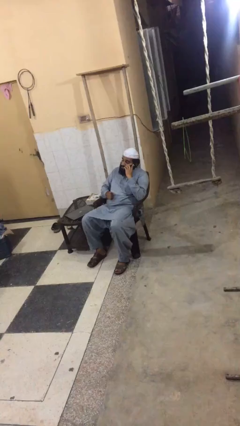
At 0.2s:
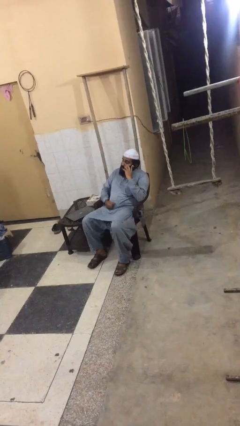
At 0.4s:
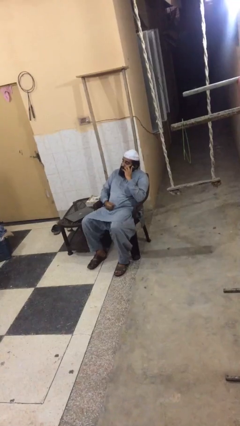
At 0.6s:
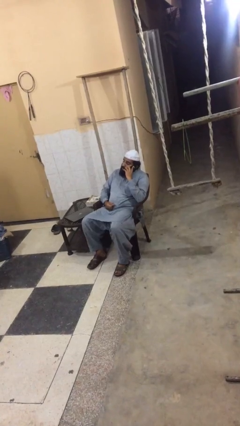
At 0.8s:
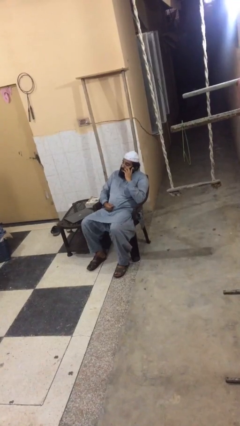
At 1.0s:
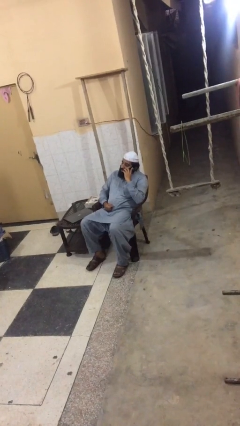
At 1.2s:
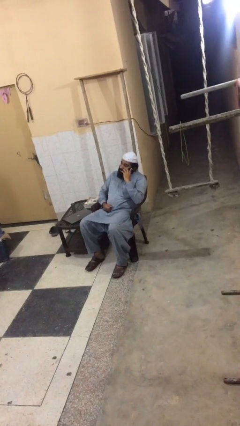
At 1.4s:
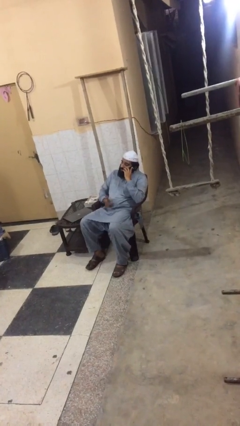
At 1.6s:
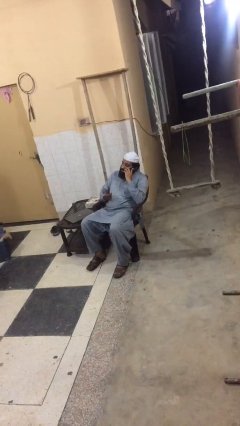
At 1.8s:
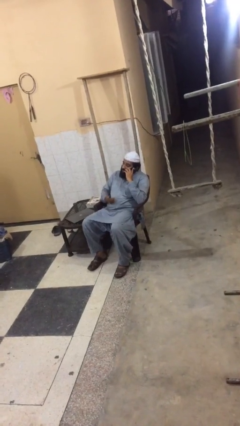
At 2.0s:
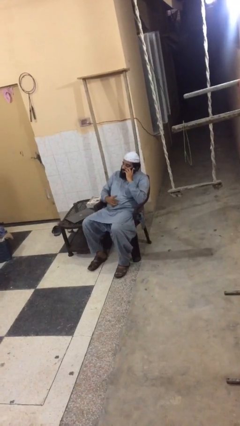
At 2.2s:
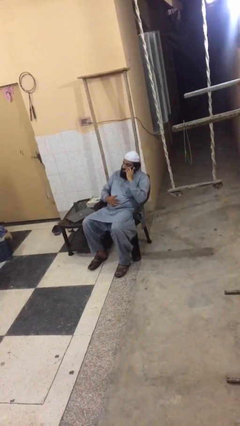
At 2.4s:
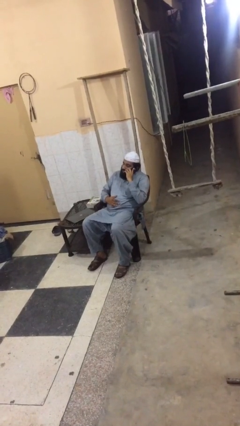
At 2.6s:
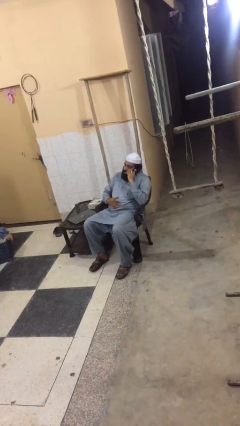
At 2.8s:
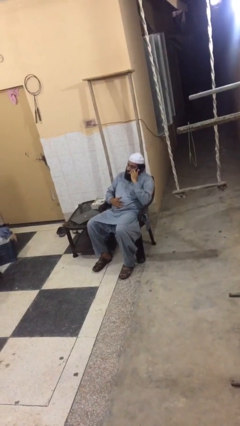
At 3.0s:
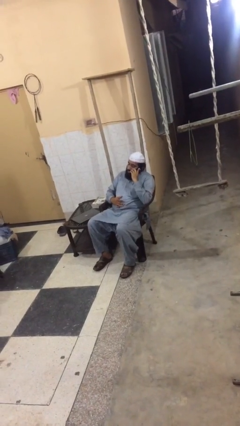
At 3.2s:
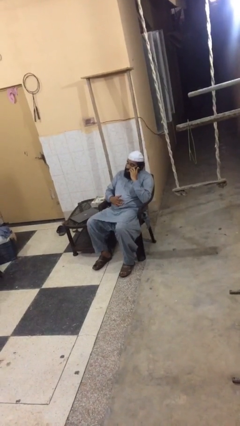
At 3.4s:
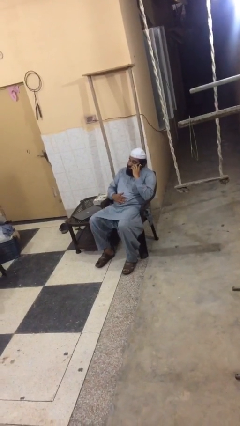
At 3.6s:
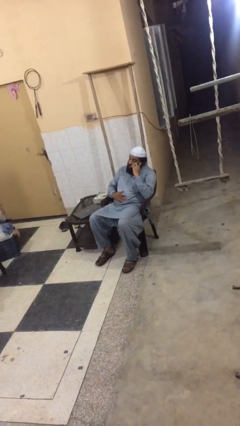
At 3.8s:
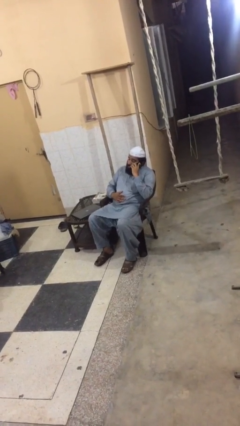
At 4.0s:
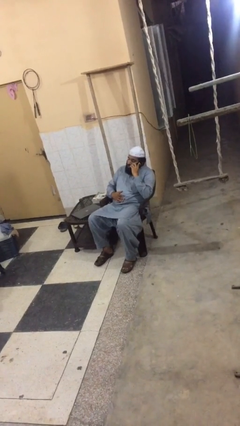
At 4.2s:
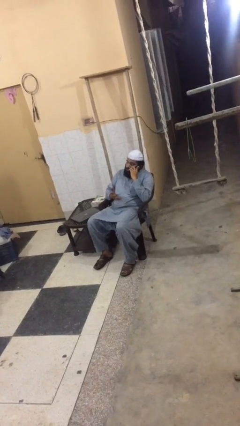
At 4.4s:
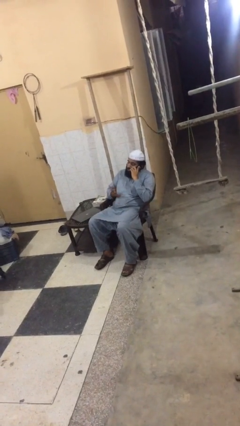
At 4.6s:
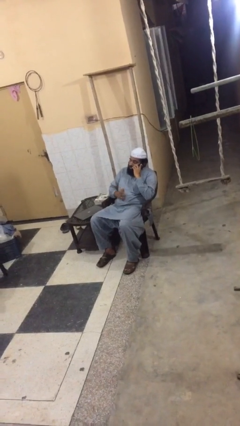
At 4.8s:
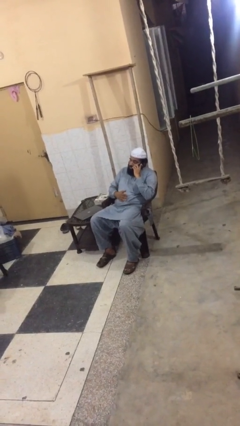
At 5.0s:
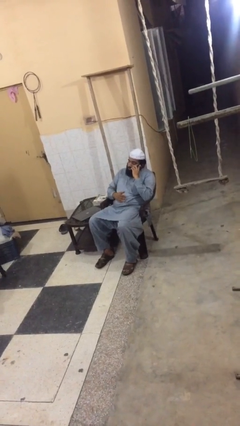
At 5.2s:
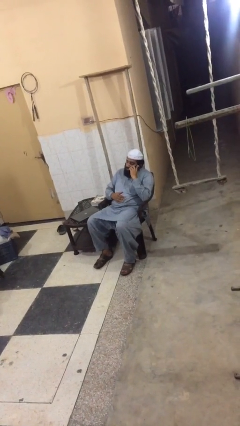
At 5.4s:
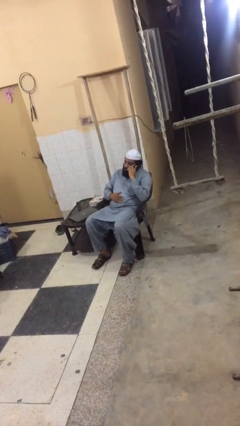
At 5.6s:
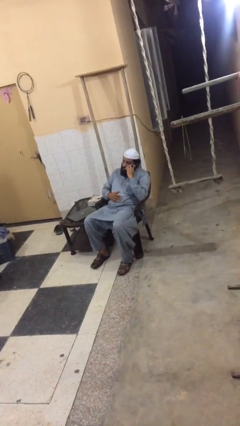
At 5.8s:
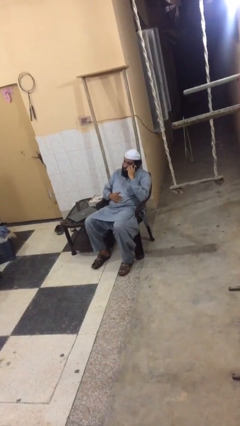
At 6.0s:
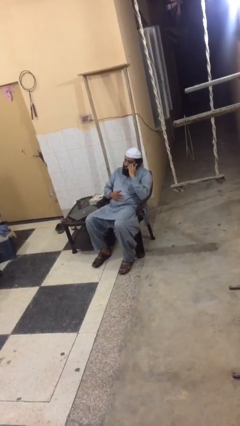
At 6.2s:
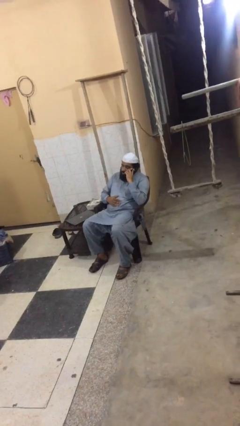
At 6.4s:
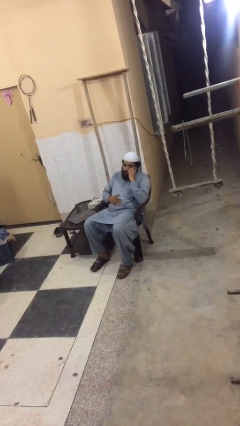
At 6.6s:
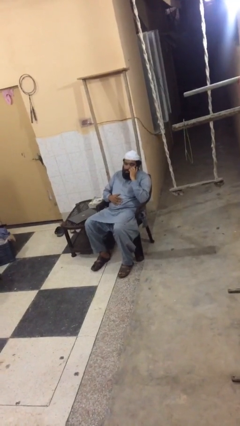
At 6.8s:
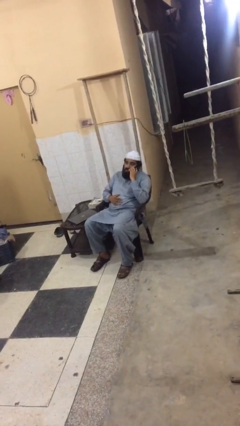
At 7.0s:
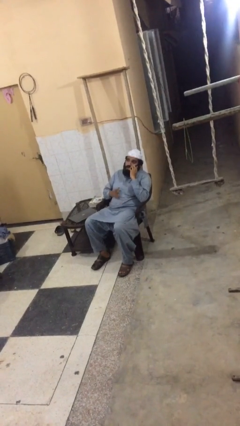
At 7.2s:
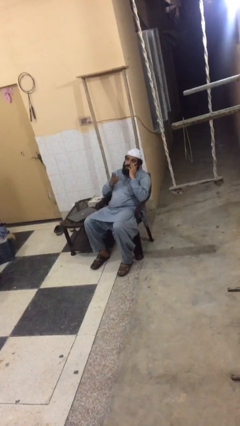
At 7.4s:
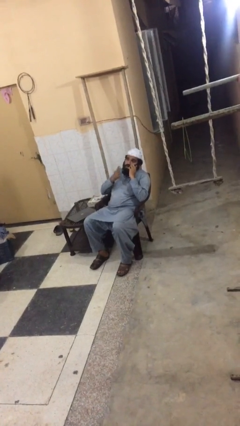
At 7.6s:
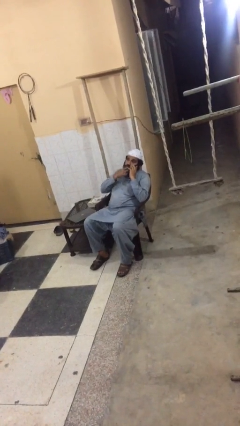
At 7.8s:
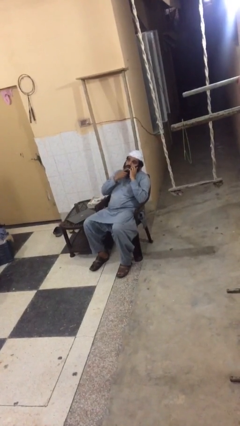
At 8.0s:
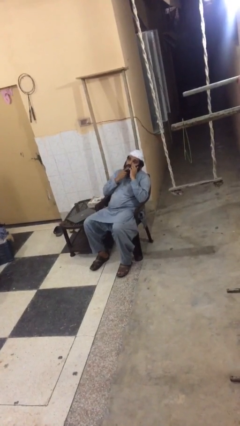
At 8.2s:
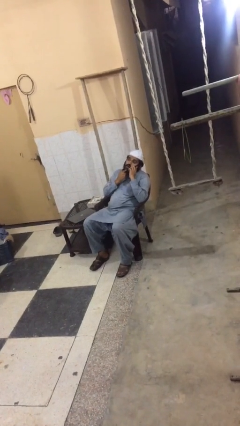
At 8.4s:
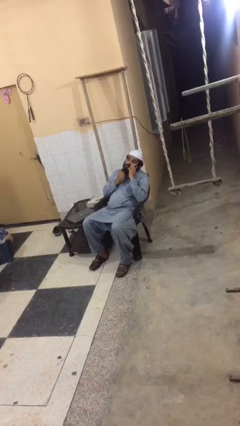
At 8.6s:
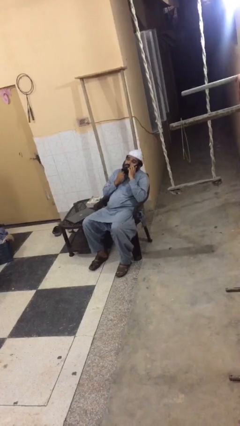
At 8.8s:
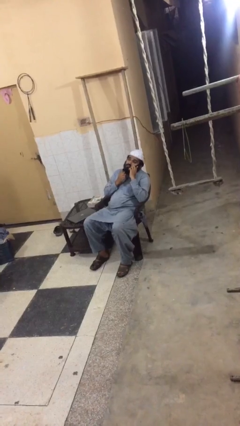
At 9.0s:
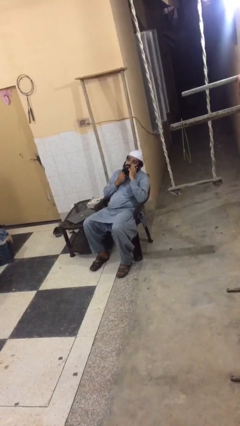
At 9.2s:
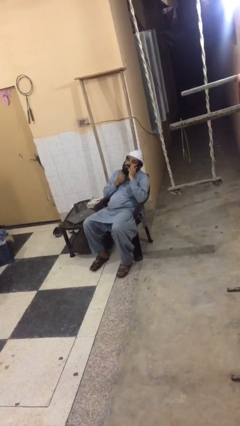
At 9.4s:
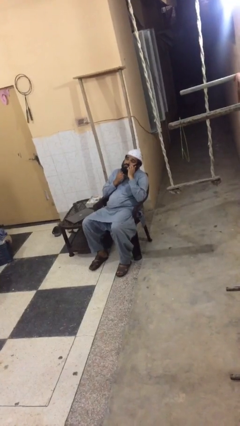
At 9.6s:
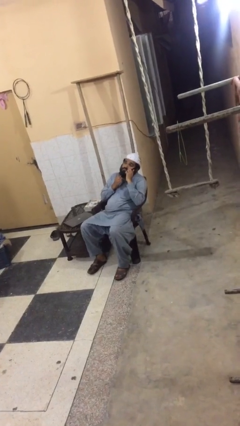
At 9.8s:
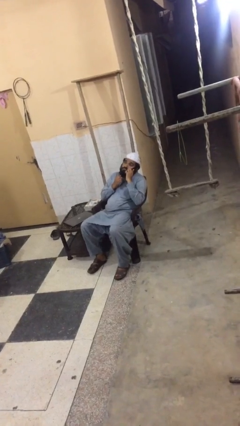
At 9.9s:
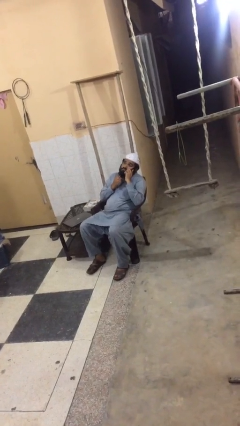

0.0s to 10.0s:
person talks on phone

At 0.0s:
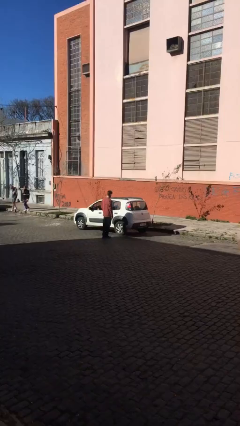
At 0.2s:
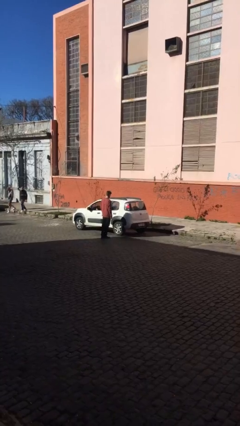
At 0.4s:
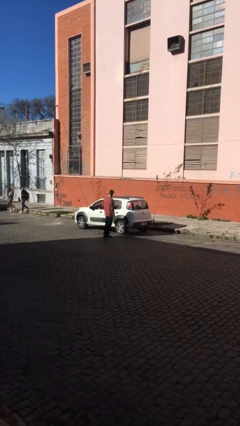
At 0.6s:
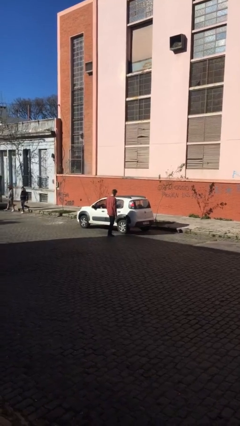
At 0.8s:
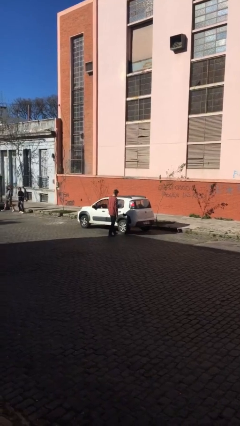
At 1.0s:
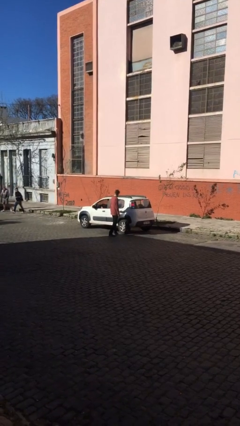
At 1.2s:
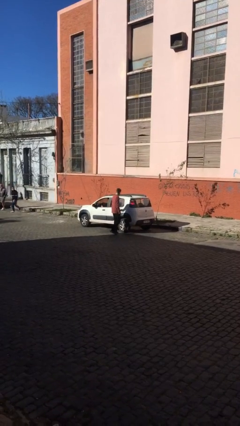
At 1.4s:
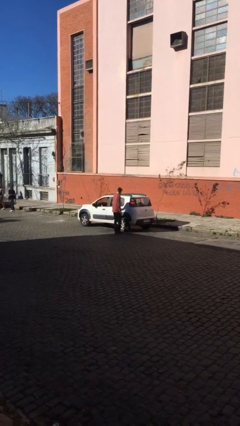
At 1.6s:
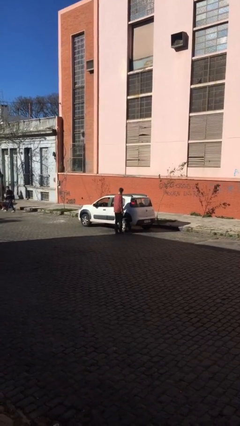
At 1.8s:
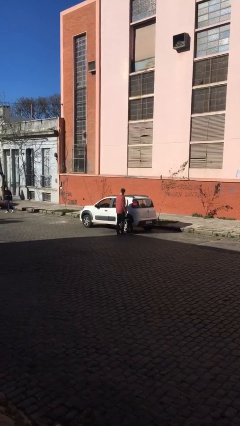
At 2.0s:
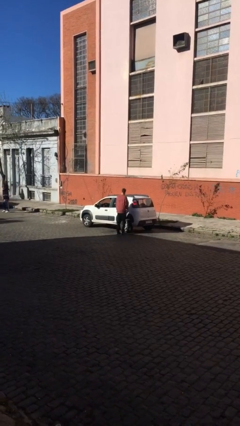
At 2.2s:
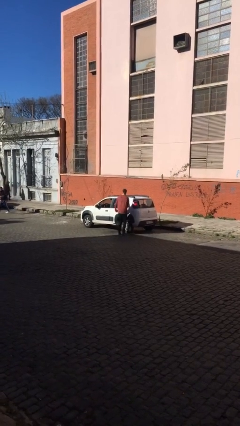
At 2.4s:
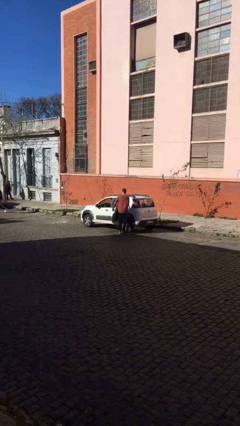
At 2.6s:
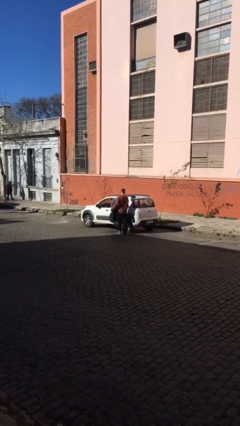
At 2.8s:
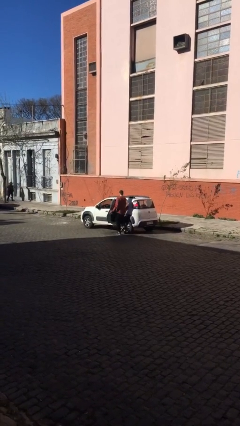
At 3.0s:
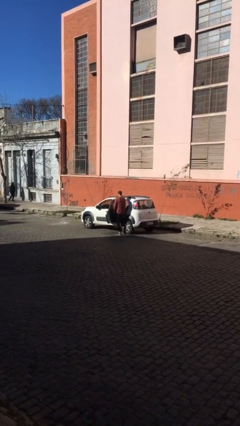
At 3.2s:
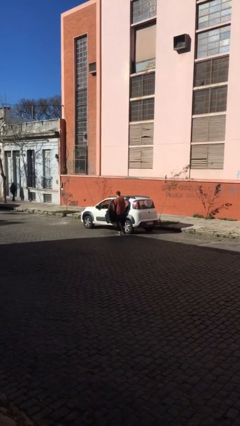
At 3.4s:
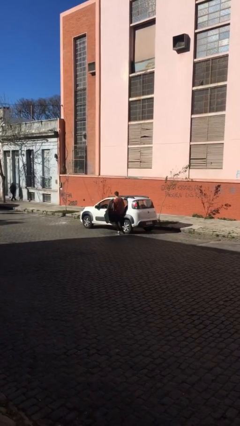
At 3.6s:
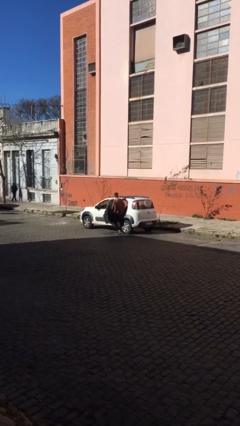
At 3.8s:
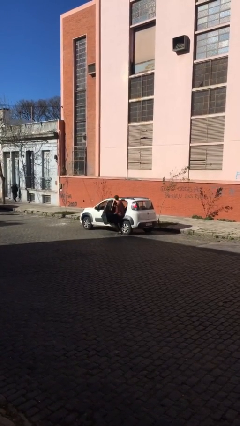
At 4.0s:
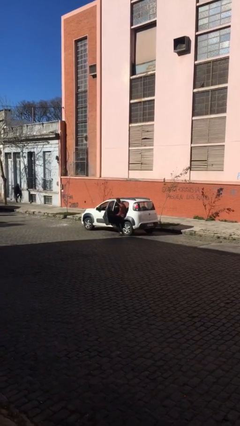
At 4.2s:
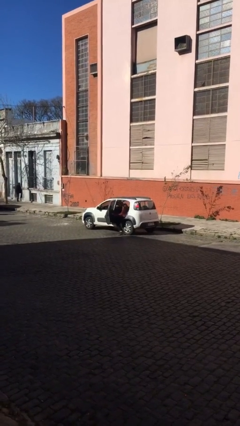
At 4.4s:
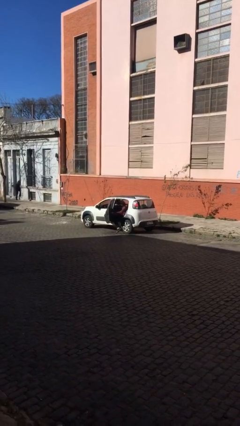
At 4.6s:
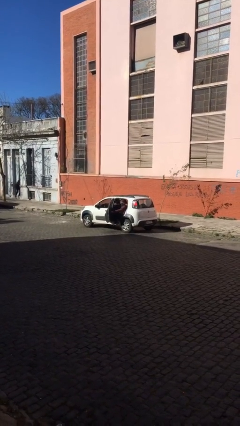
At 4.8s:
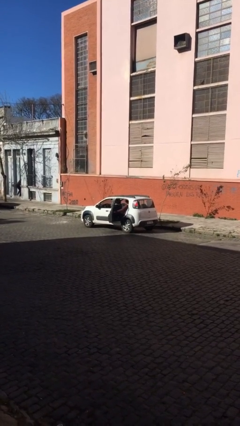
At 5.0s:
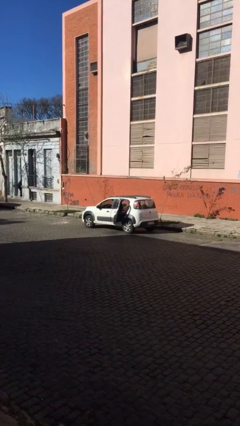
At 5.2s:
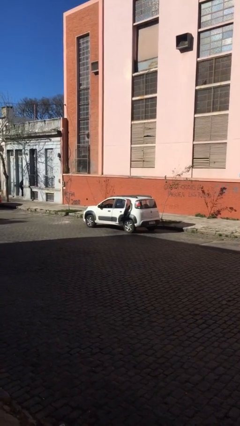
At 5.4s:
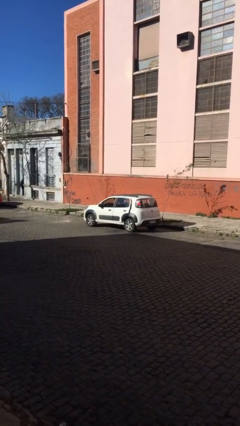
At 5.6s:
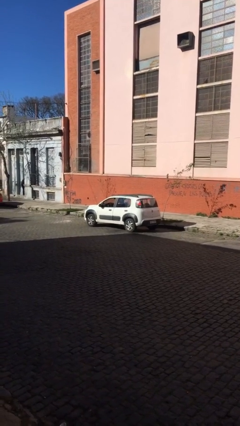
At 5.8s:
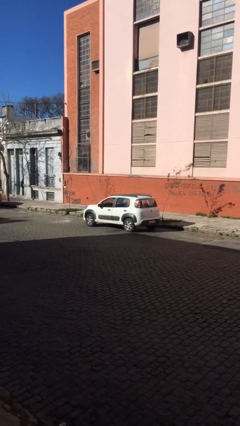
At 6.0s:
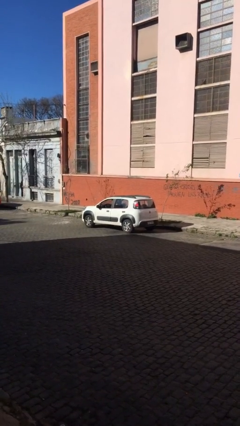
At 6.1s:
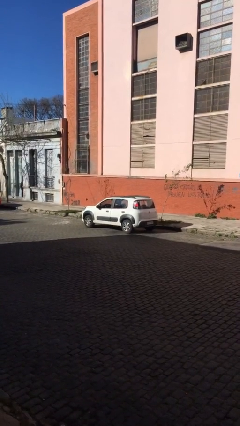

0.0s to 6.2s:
car picks up person

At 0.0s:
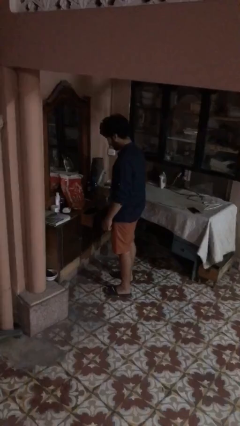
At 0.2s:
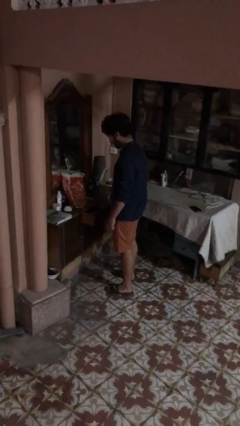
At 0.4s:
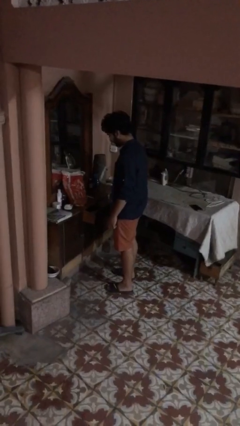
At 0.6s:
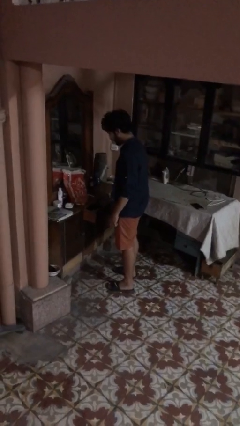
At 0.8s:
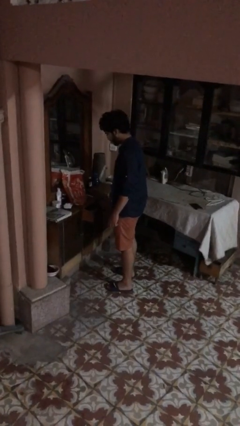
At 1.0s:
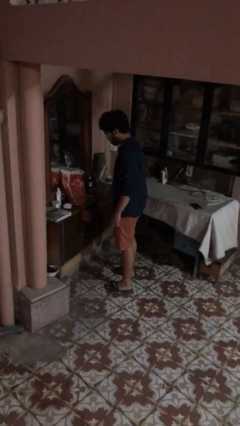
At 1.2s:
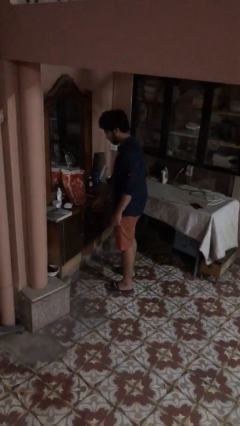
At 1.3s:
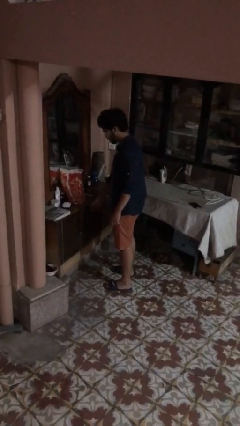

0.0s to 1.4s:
person closes dresser drawer

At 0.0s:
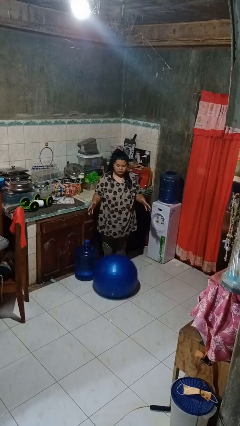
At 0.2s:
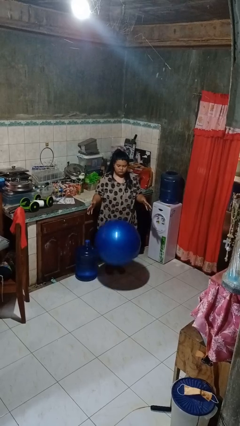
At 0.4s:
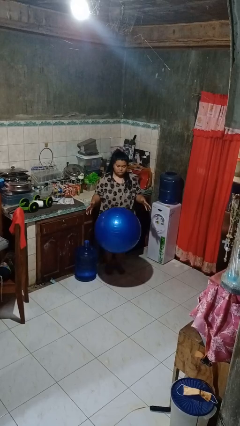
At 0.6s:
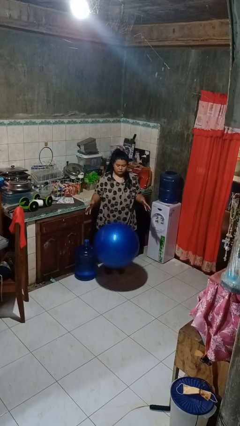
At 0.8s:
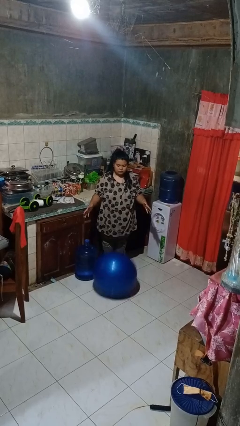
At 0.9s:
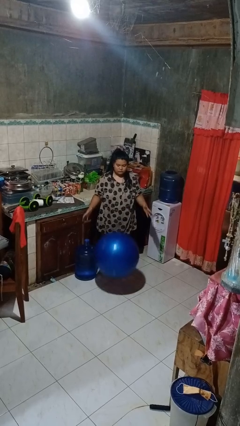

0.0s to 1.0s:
person bounces ball on floor
